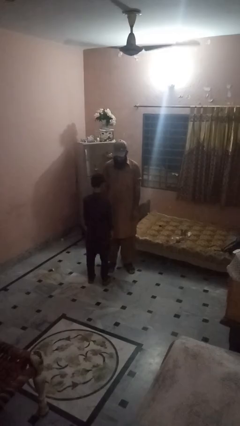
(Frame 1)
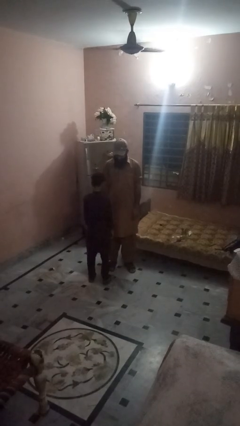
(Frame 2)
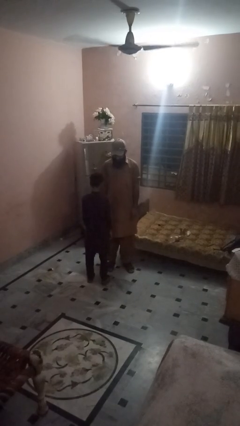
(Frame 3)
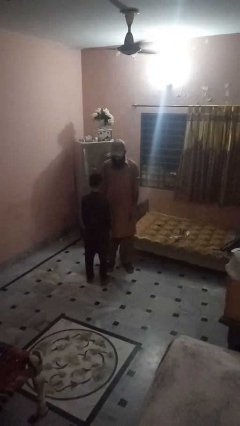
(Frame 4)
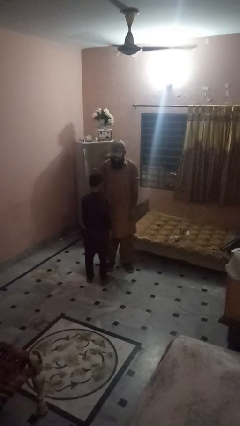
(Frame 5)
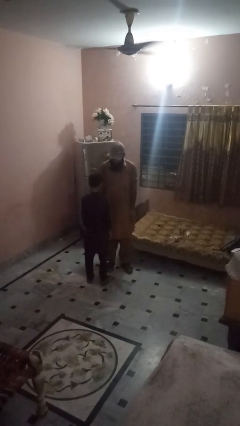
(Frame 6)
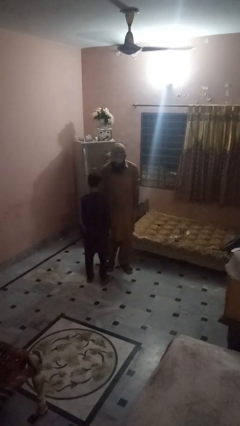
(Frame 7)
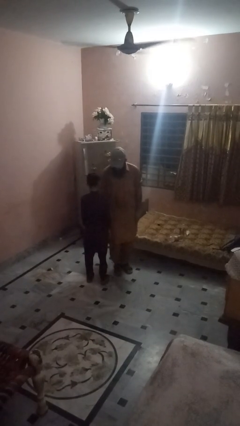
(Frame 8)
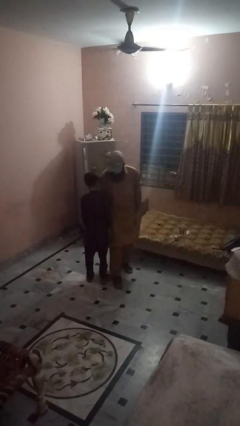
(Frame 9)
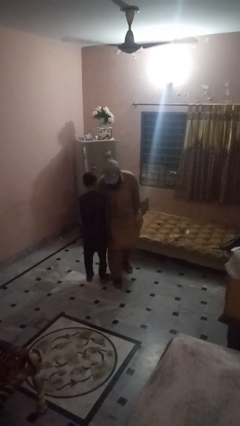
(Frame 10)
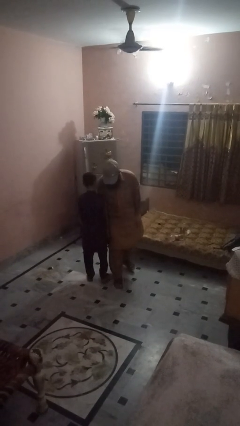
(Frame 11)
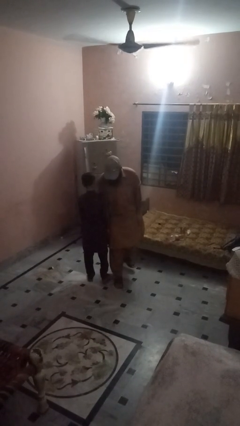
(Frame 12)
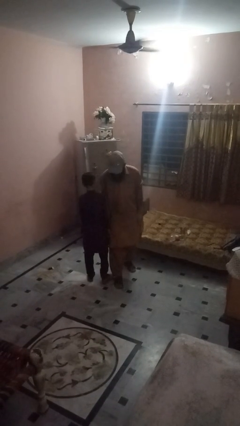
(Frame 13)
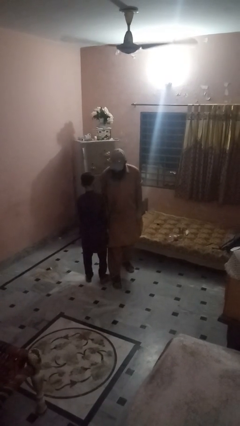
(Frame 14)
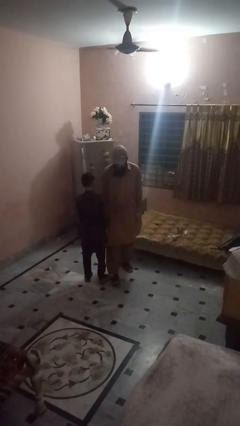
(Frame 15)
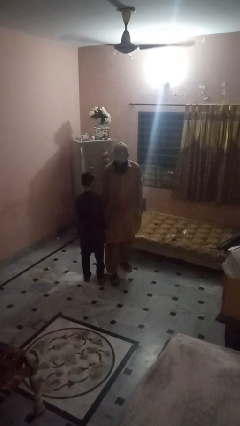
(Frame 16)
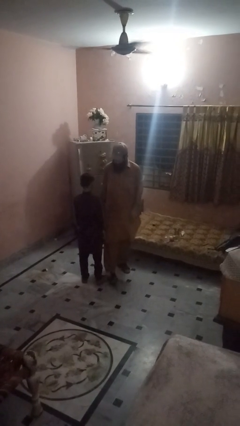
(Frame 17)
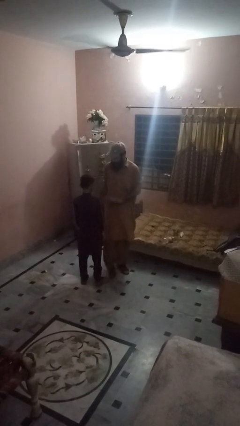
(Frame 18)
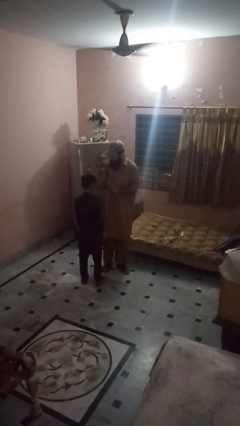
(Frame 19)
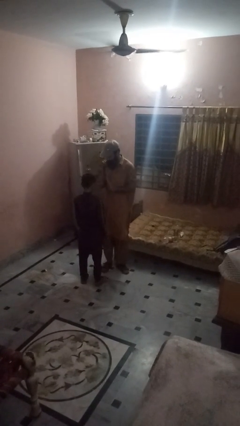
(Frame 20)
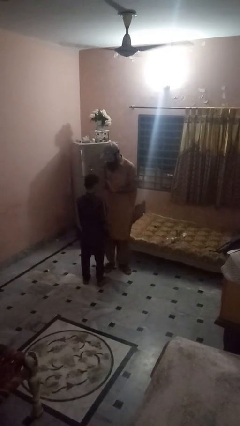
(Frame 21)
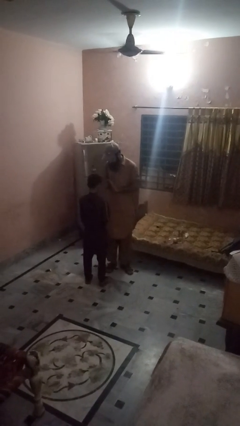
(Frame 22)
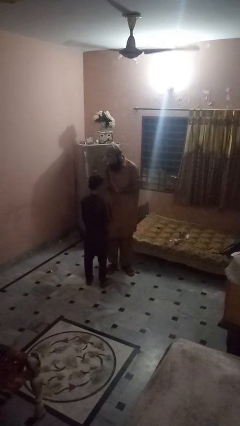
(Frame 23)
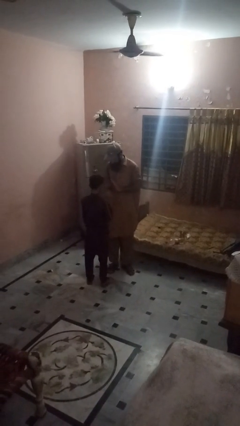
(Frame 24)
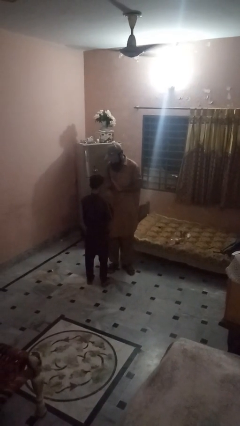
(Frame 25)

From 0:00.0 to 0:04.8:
person bumps into person

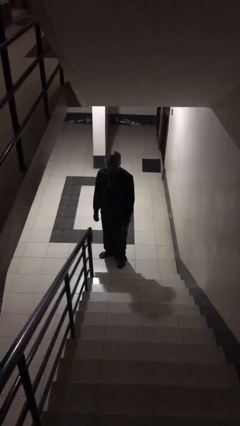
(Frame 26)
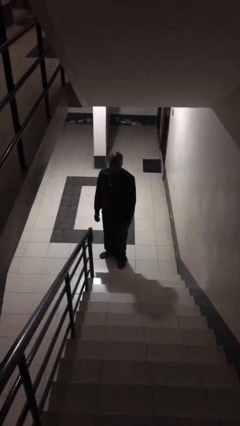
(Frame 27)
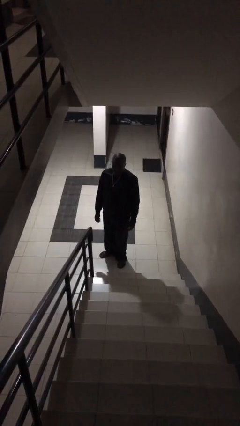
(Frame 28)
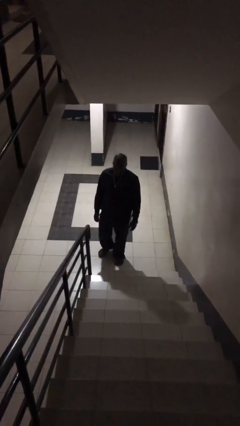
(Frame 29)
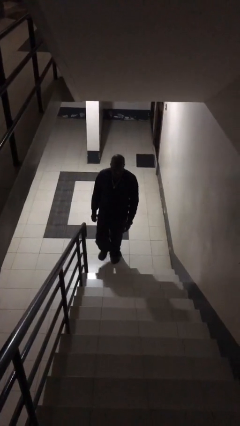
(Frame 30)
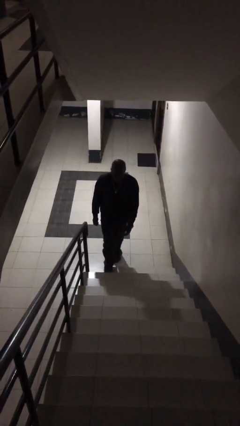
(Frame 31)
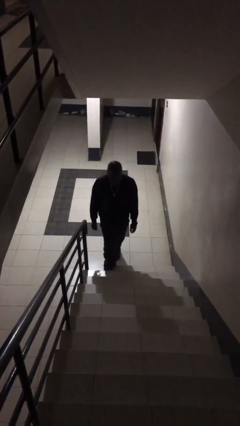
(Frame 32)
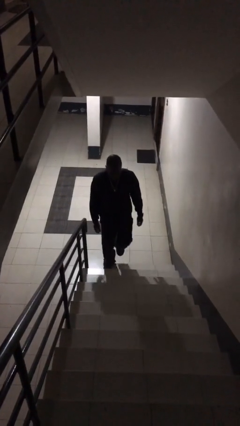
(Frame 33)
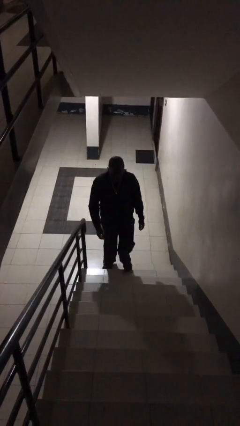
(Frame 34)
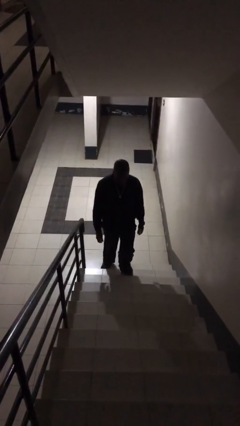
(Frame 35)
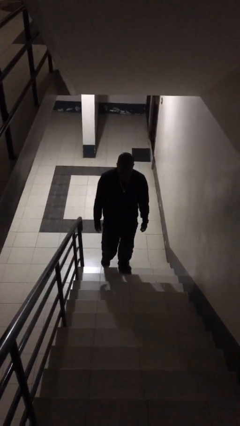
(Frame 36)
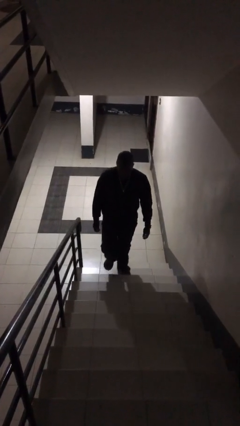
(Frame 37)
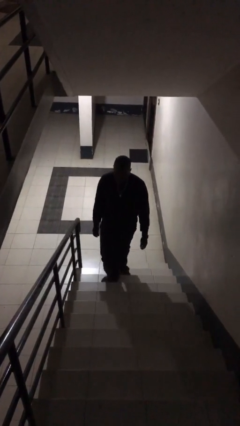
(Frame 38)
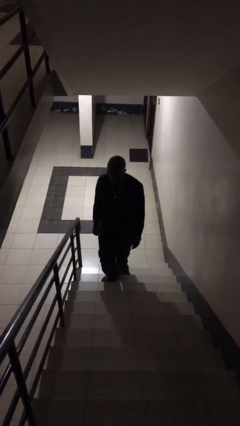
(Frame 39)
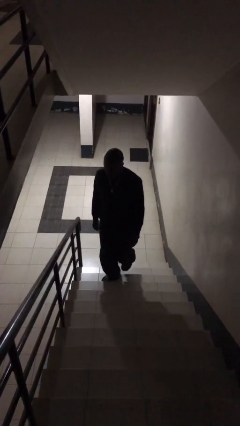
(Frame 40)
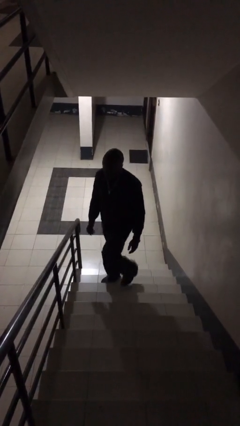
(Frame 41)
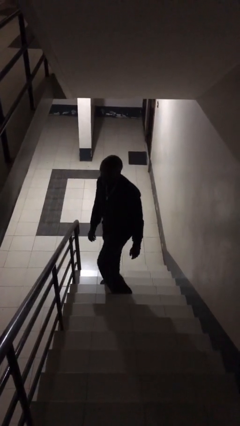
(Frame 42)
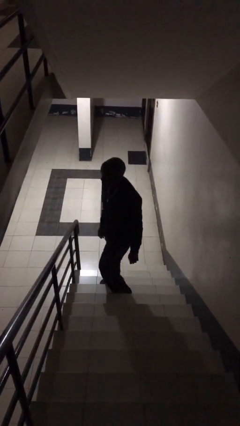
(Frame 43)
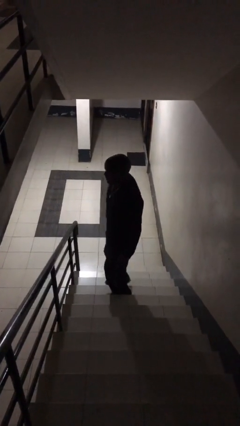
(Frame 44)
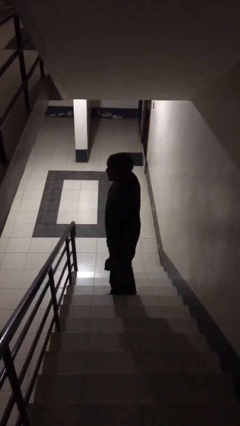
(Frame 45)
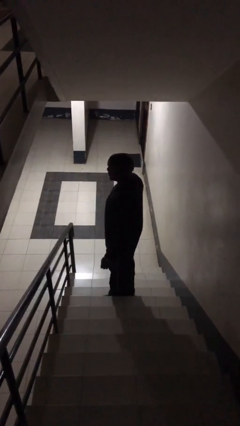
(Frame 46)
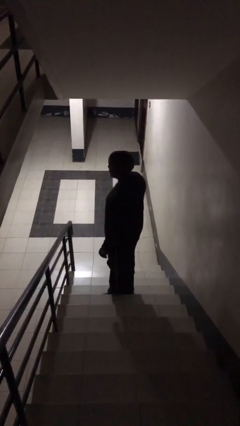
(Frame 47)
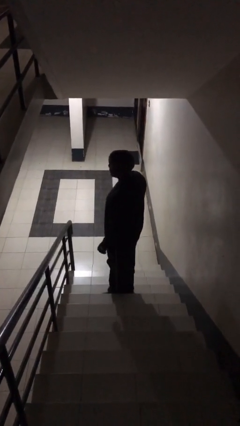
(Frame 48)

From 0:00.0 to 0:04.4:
person climbs up stairs

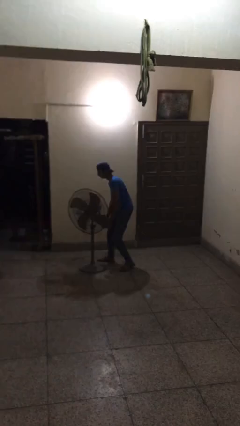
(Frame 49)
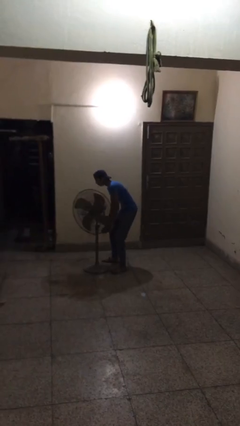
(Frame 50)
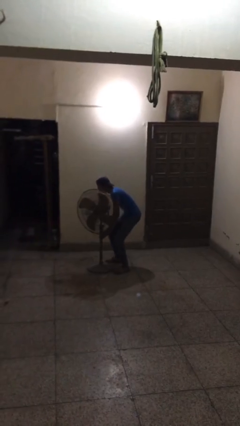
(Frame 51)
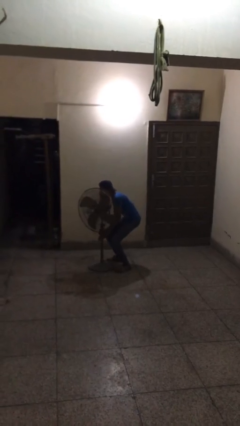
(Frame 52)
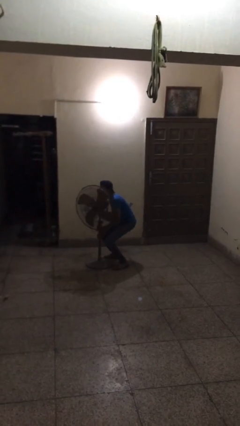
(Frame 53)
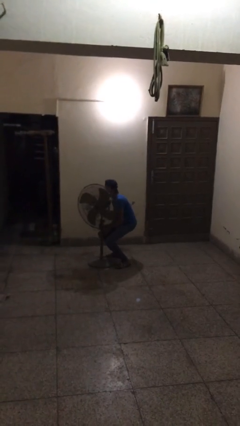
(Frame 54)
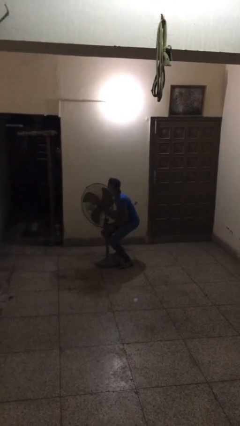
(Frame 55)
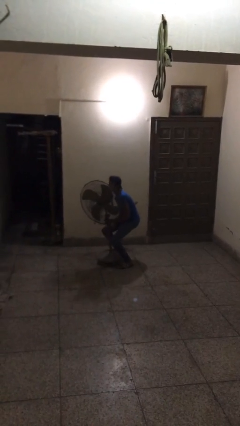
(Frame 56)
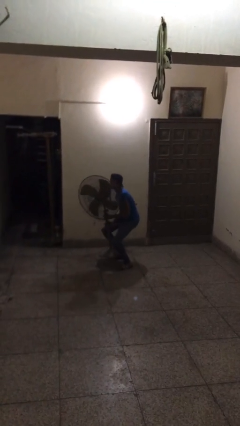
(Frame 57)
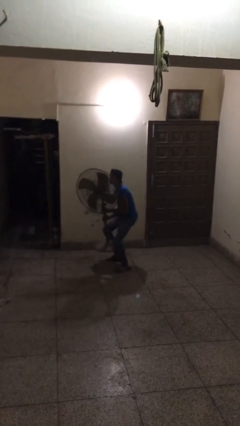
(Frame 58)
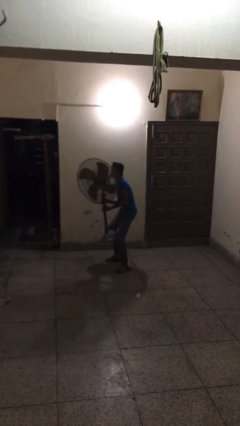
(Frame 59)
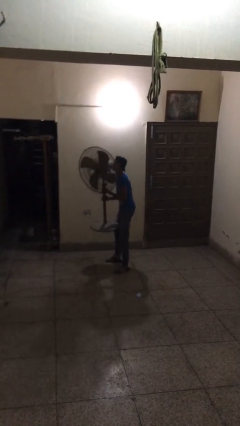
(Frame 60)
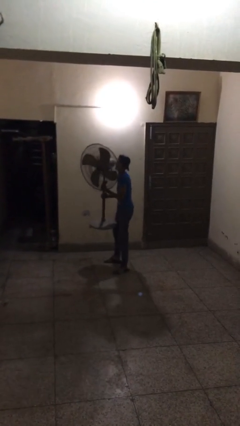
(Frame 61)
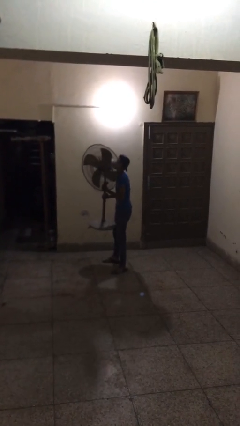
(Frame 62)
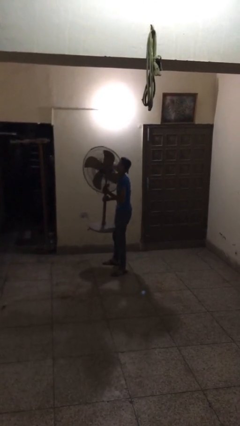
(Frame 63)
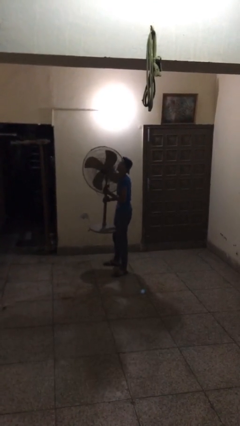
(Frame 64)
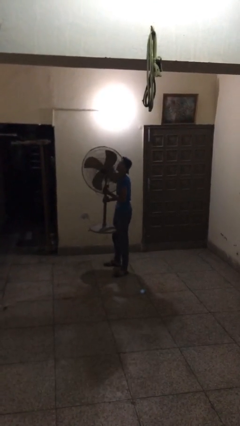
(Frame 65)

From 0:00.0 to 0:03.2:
person picks up object from floor

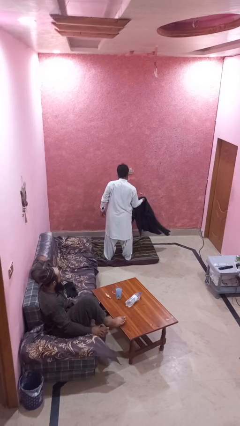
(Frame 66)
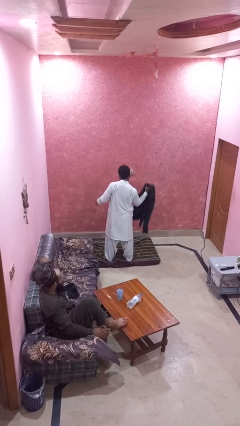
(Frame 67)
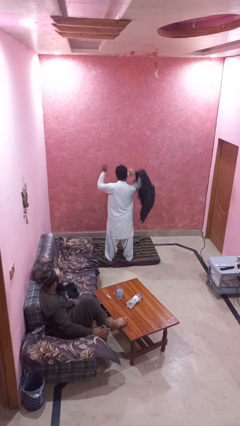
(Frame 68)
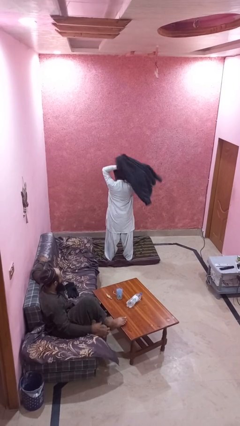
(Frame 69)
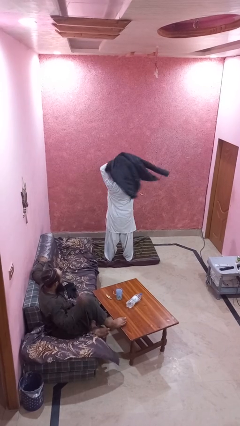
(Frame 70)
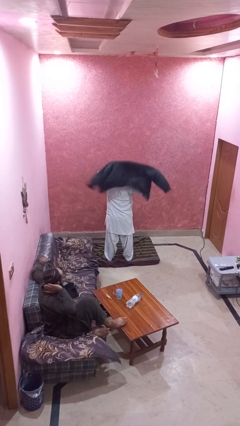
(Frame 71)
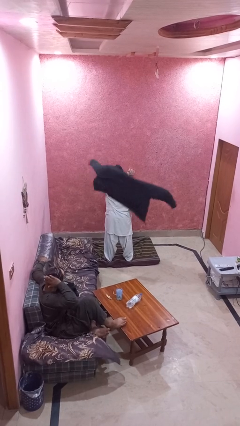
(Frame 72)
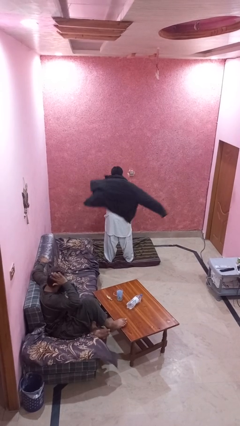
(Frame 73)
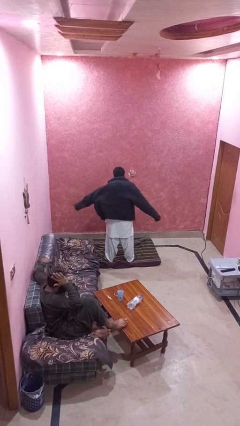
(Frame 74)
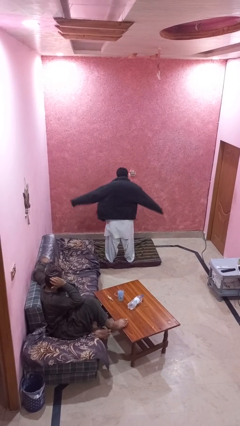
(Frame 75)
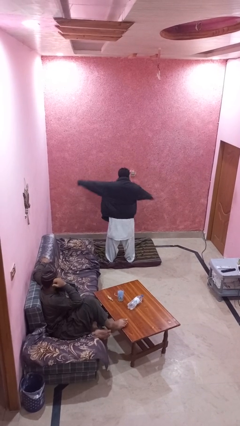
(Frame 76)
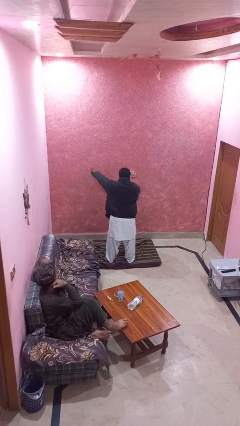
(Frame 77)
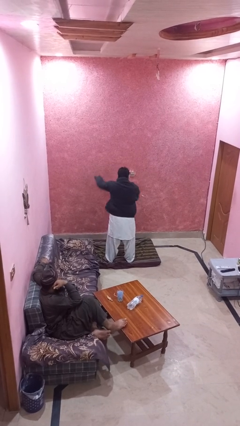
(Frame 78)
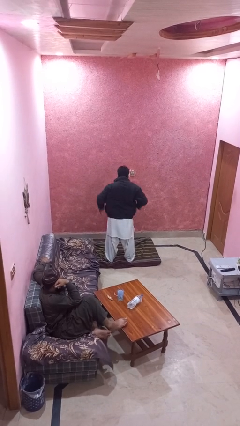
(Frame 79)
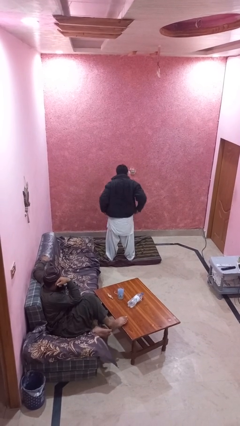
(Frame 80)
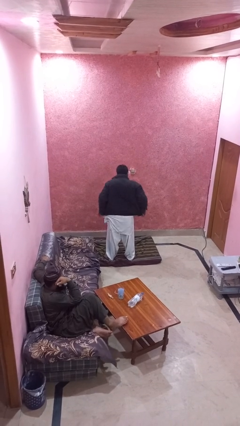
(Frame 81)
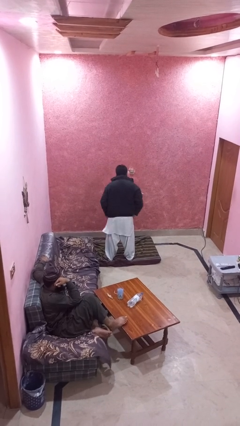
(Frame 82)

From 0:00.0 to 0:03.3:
person puts on jacket

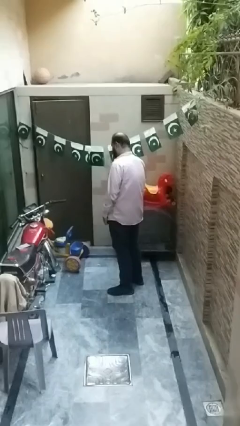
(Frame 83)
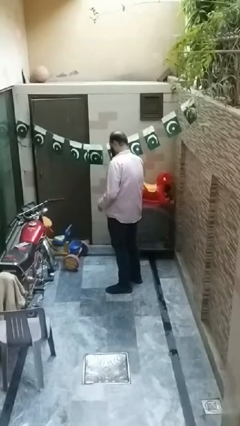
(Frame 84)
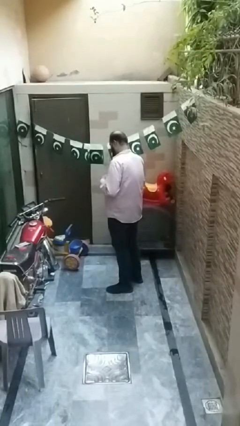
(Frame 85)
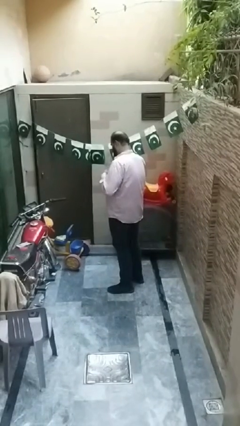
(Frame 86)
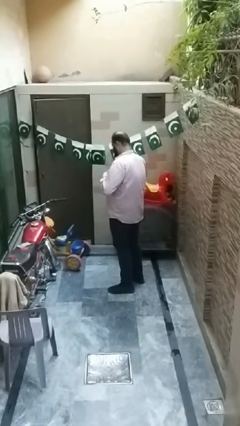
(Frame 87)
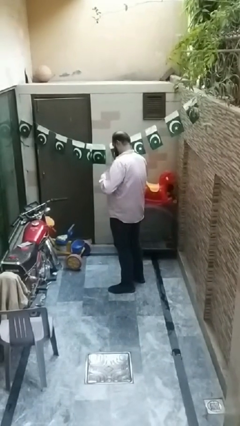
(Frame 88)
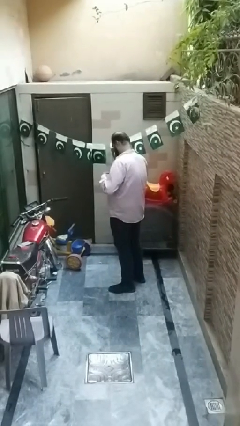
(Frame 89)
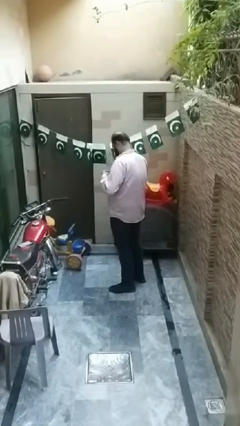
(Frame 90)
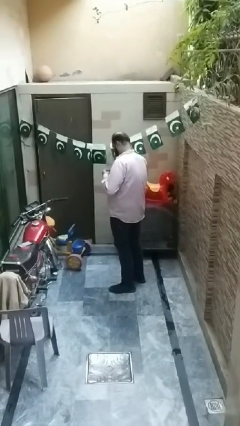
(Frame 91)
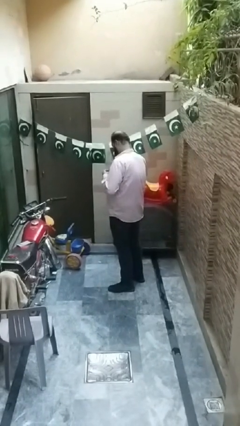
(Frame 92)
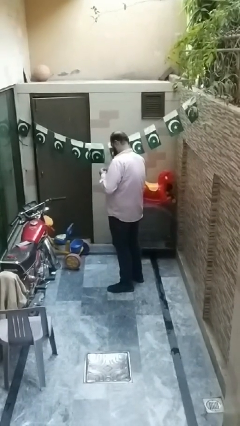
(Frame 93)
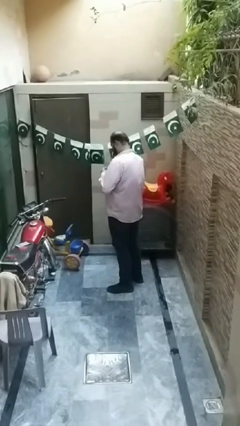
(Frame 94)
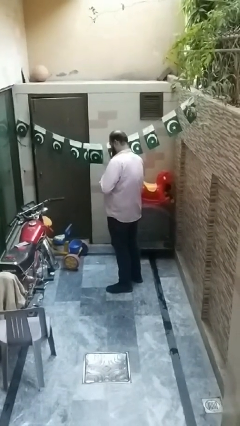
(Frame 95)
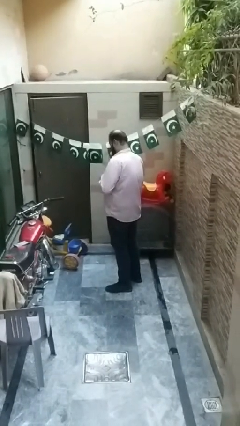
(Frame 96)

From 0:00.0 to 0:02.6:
person buttons shirt
